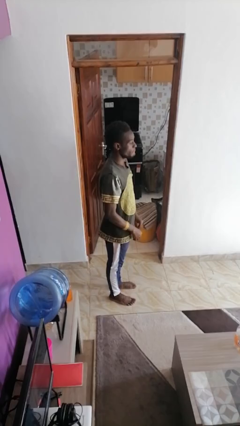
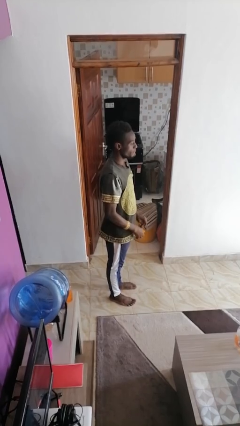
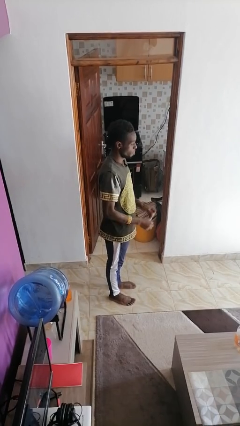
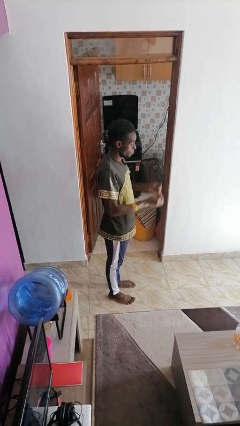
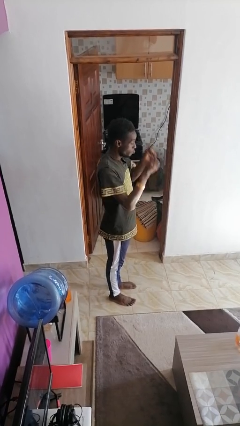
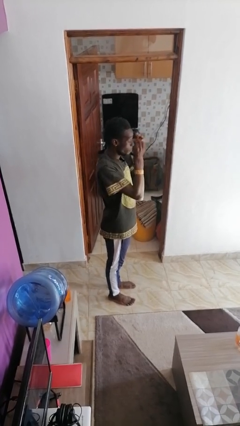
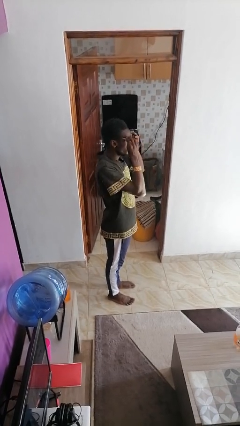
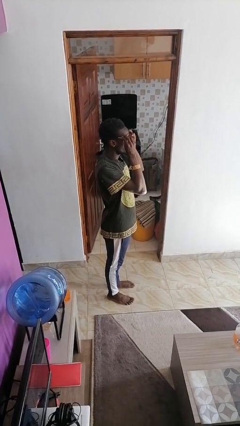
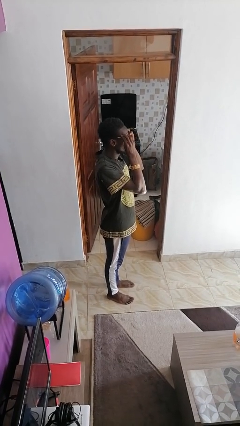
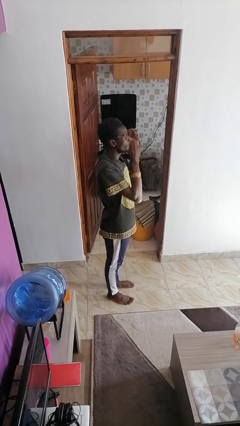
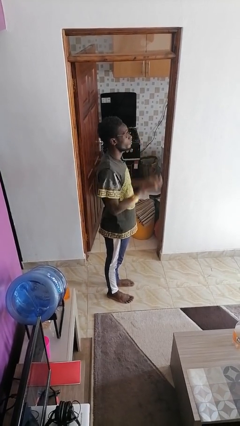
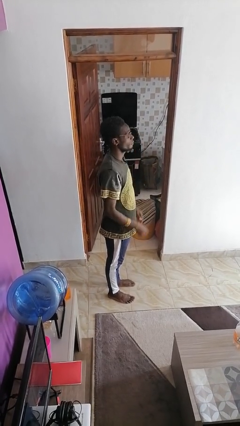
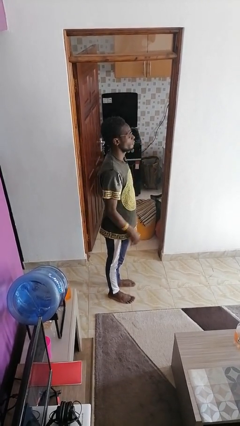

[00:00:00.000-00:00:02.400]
person puts on glasses

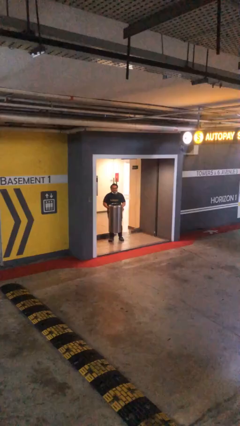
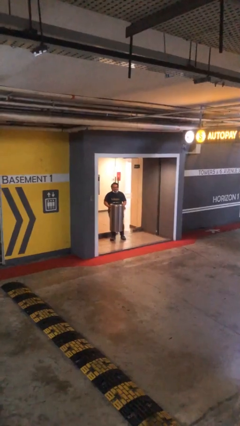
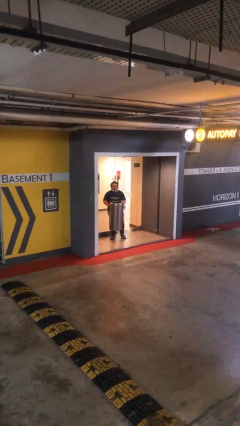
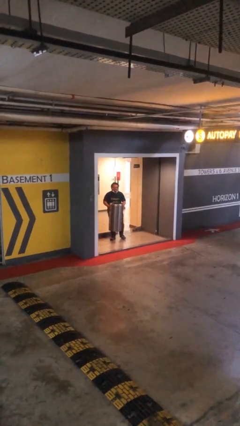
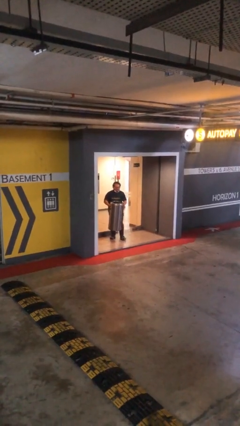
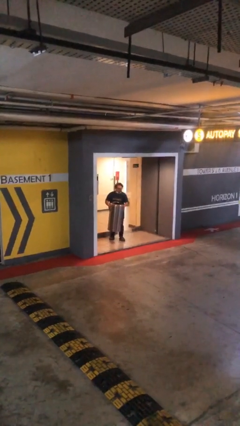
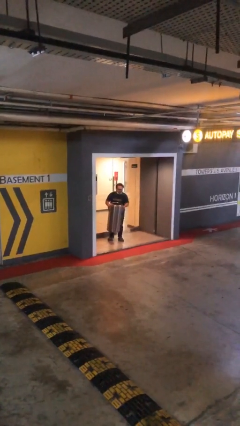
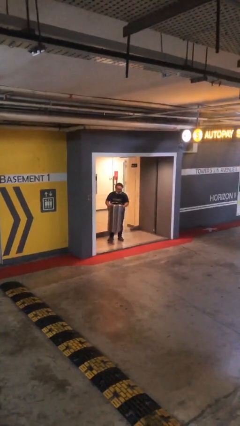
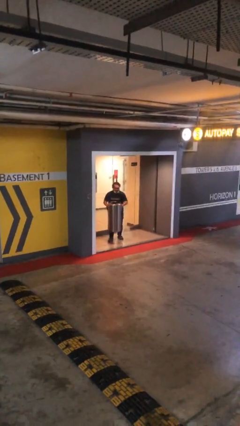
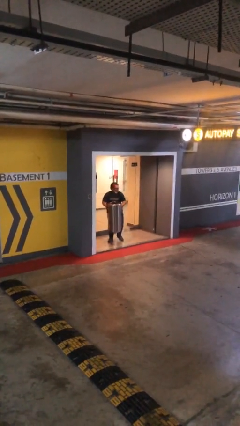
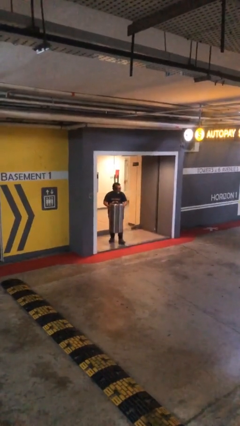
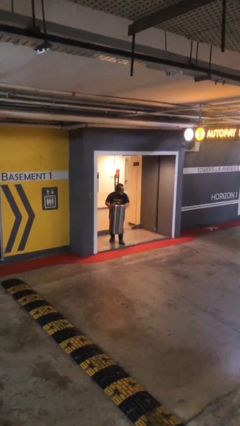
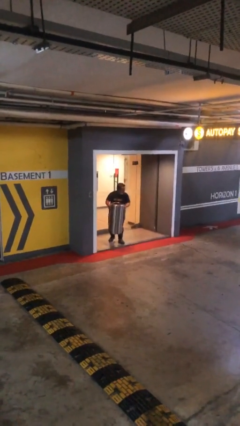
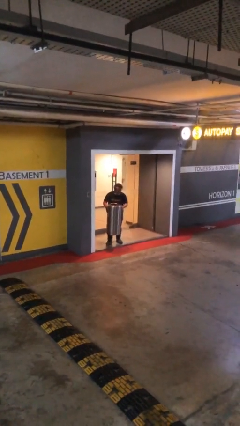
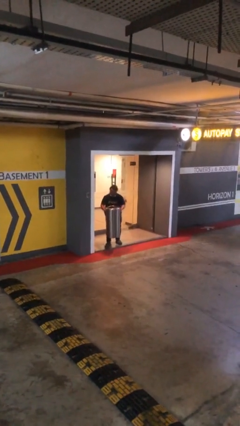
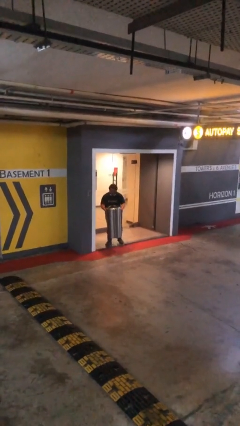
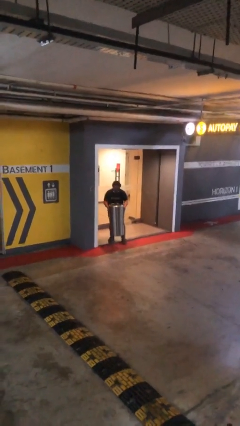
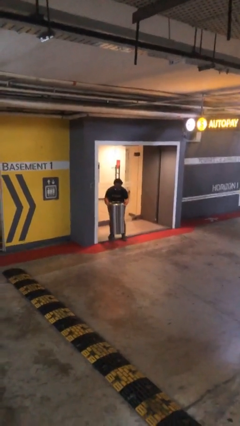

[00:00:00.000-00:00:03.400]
person carries heavy object

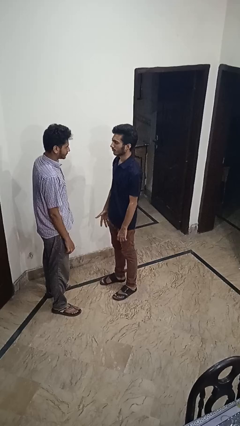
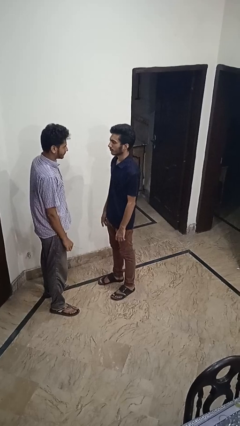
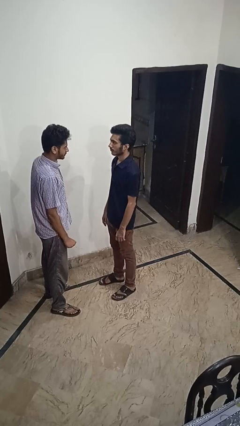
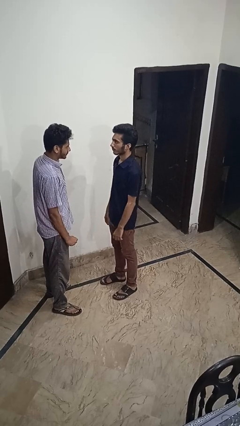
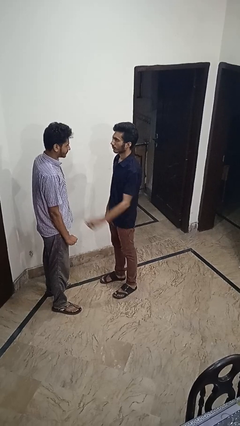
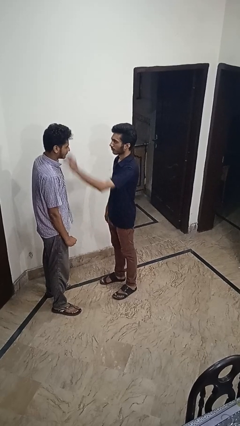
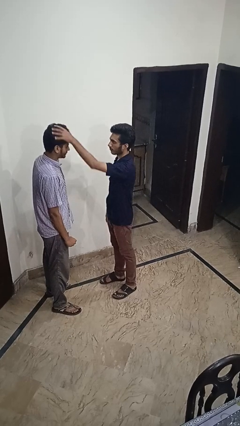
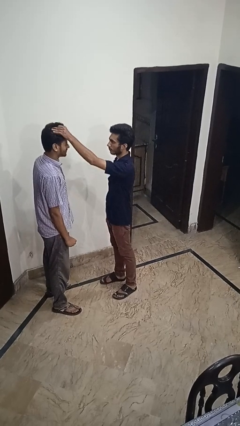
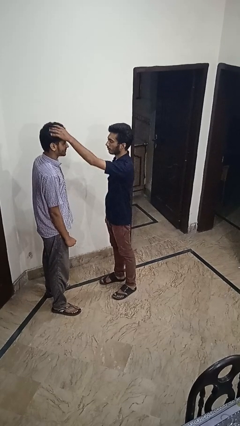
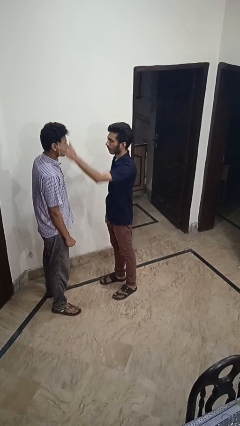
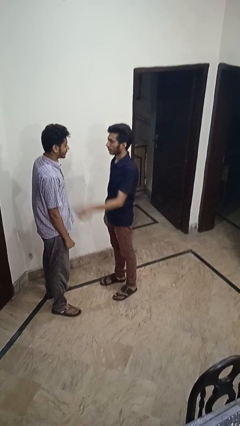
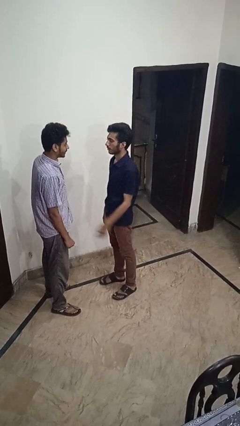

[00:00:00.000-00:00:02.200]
person grabs person by hair

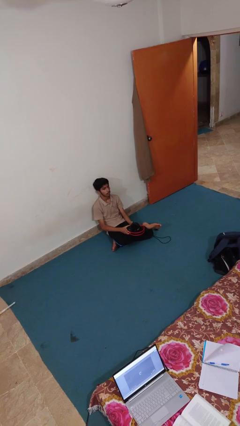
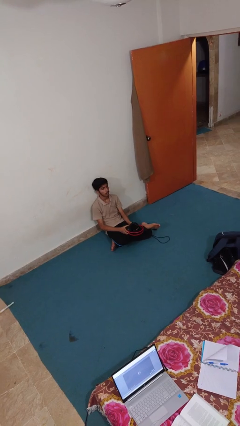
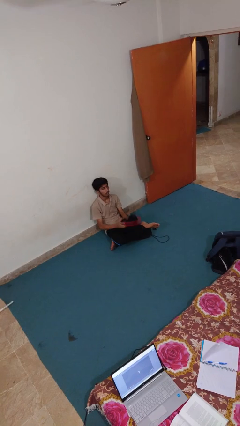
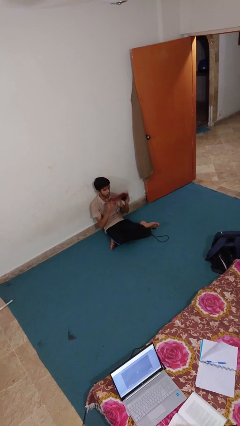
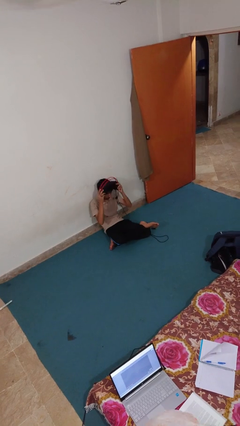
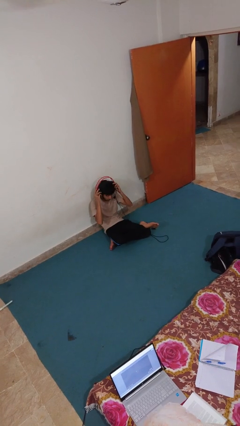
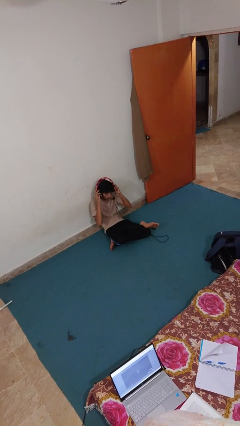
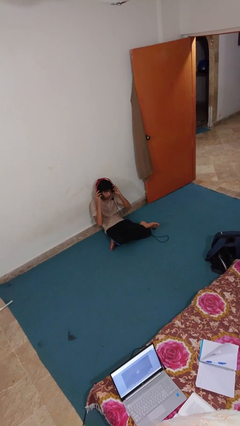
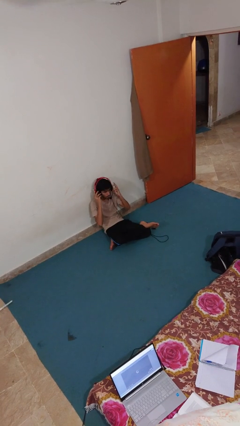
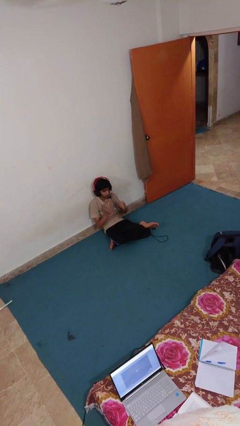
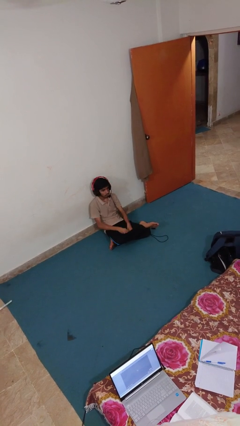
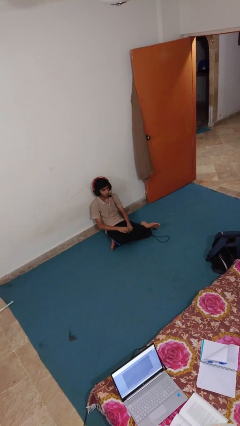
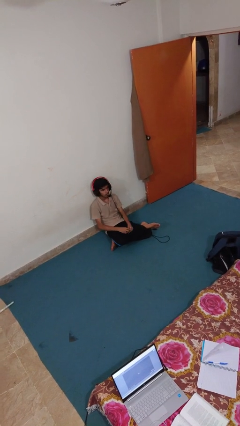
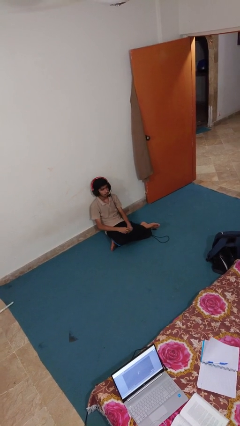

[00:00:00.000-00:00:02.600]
person puts on headphones

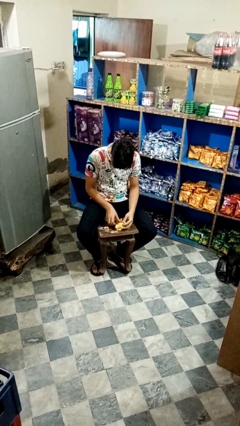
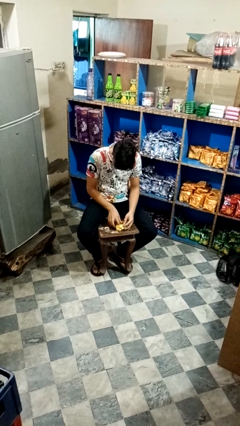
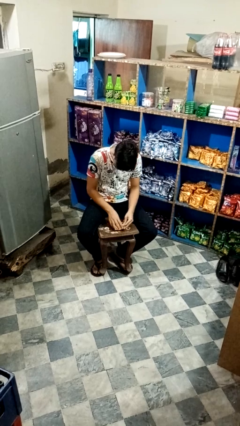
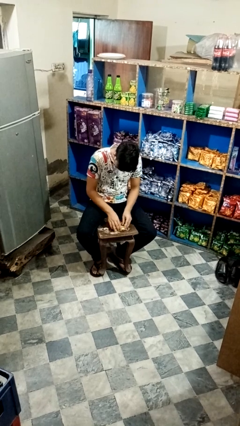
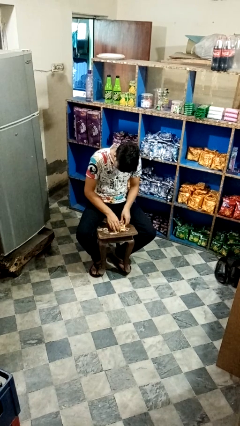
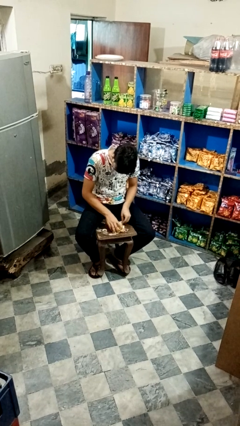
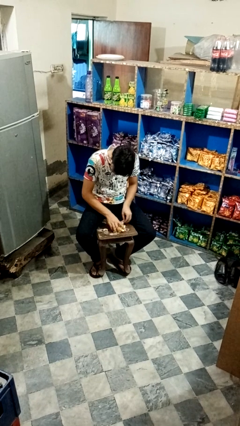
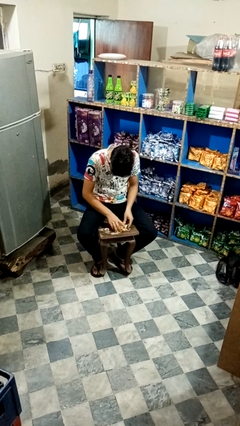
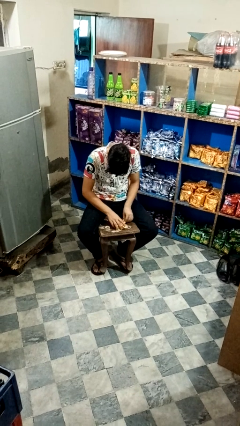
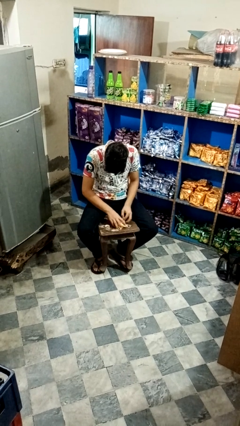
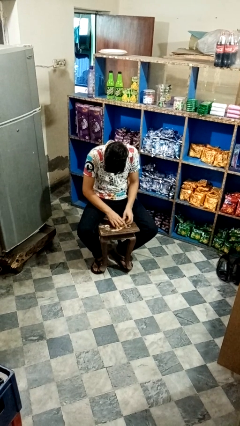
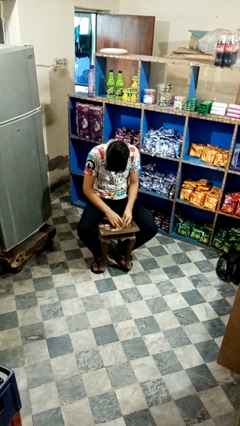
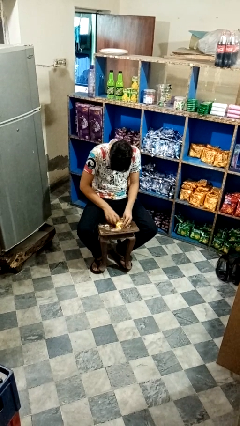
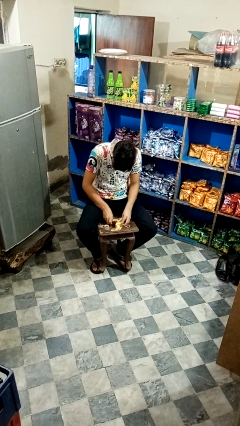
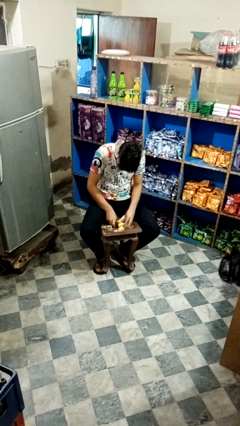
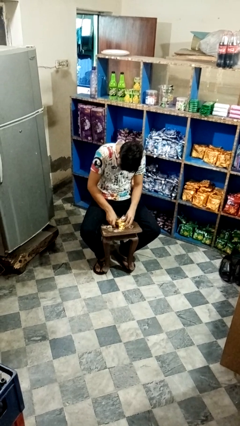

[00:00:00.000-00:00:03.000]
person wraps box

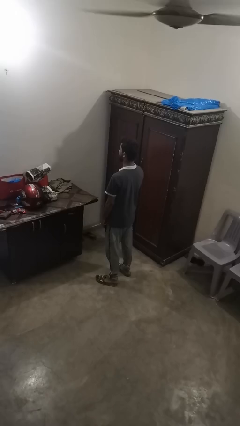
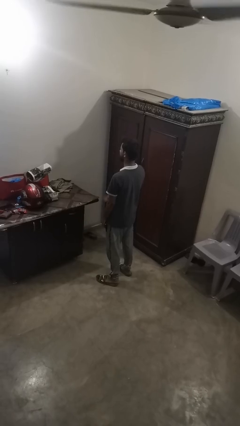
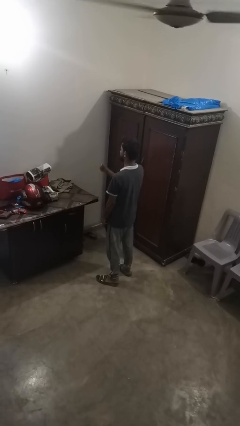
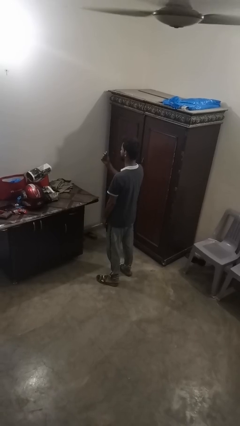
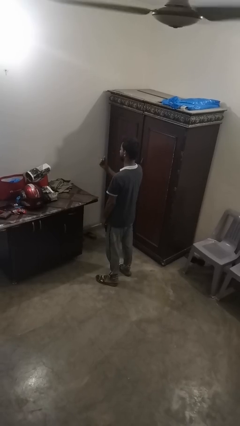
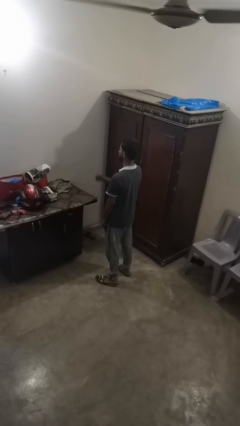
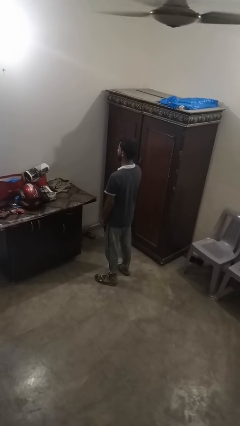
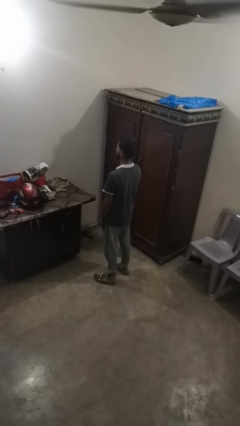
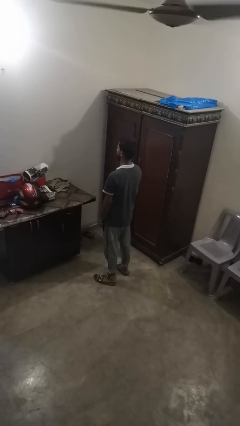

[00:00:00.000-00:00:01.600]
person snaps fingers

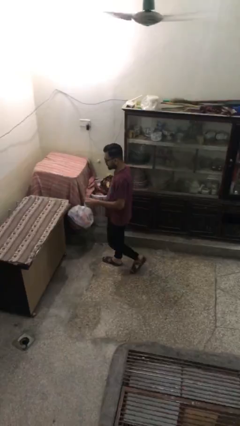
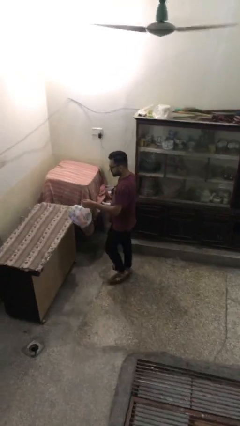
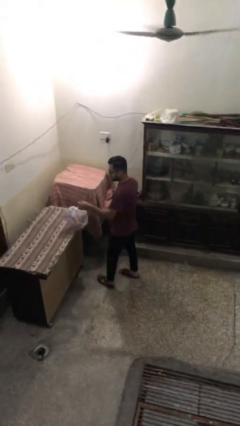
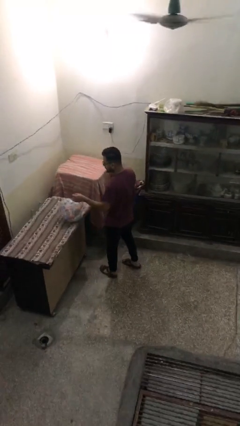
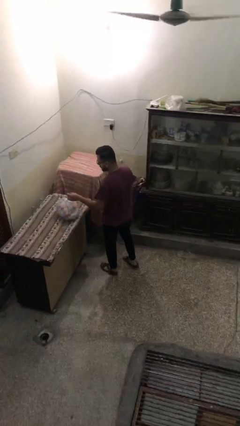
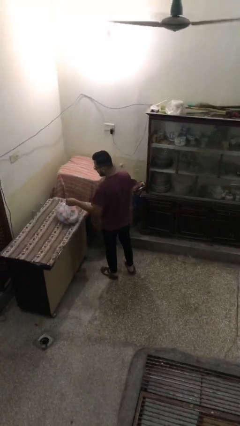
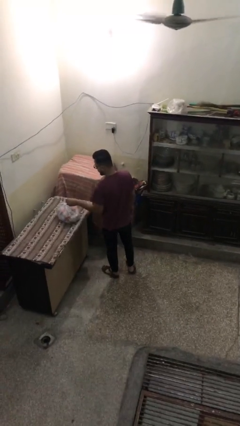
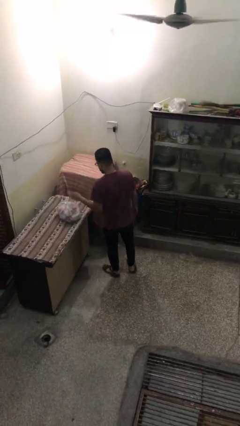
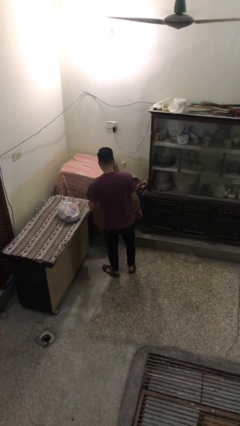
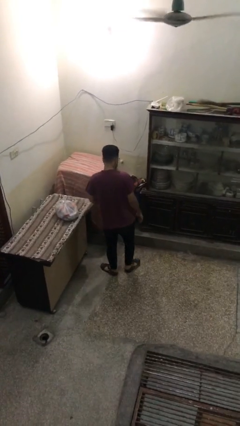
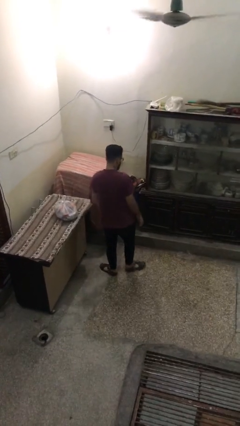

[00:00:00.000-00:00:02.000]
person puts down object on table
